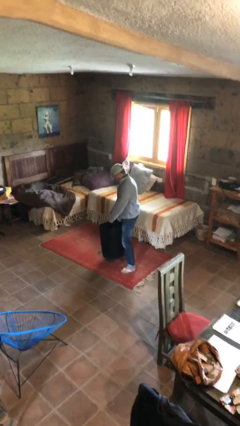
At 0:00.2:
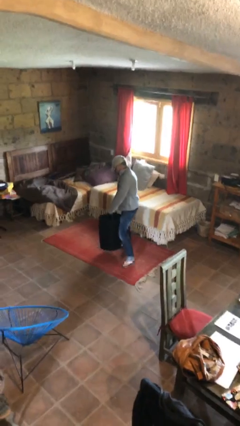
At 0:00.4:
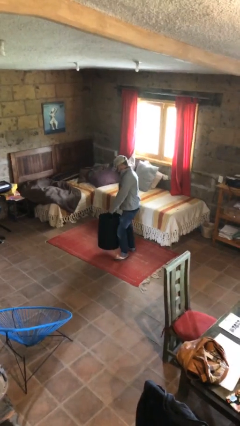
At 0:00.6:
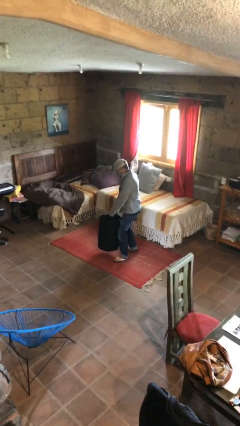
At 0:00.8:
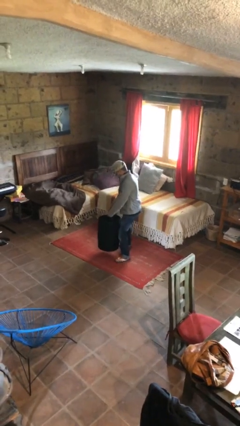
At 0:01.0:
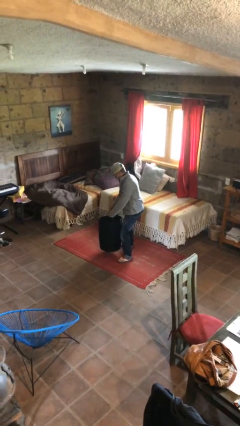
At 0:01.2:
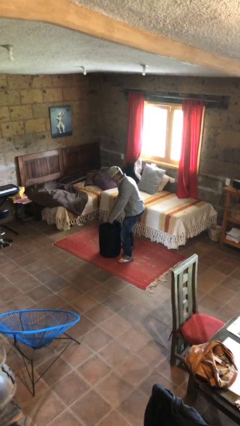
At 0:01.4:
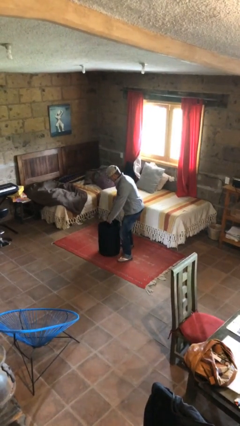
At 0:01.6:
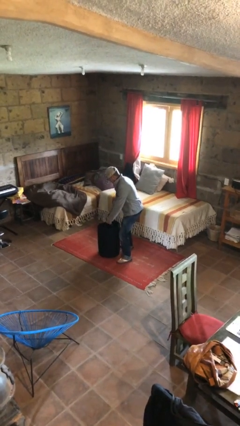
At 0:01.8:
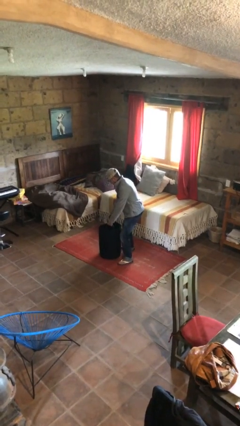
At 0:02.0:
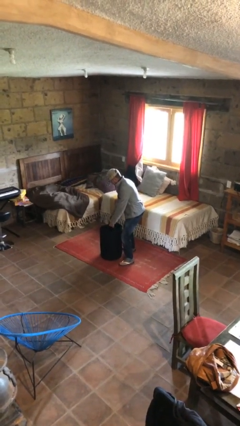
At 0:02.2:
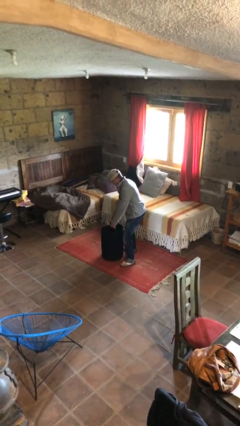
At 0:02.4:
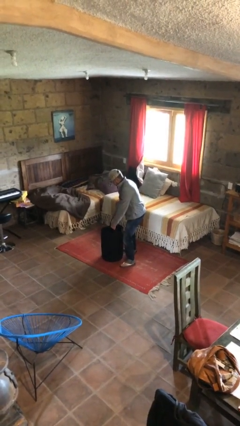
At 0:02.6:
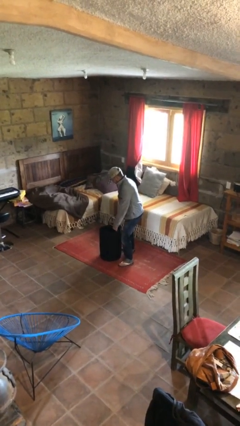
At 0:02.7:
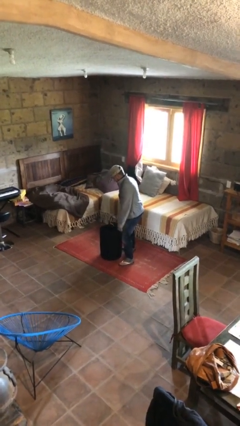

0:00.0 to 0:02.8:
person puts down object on floor

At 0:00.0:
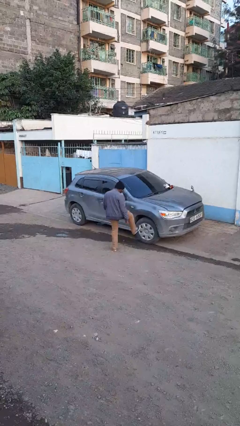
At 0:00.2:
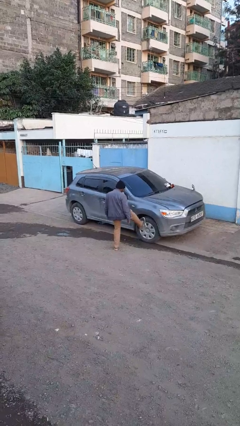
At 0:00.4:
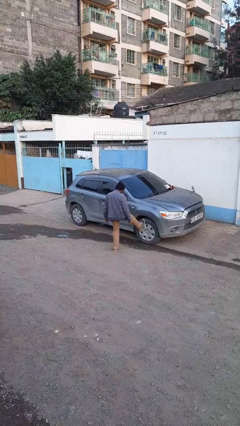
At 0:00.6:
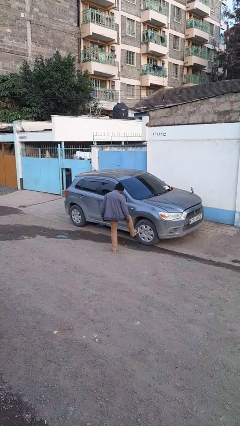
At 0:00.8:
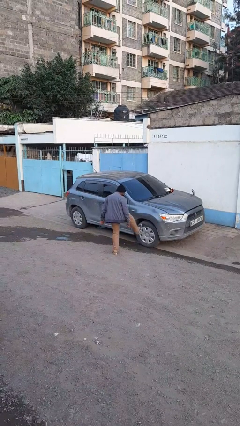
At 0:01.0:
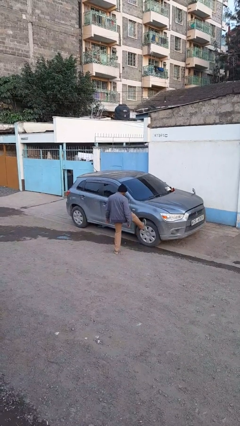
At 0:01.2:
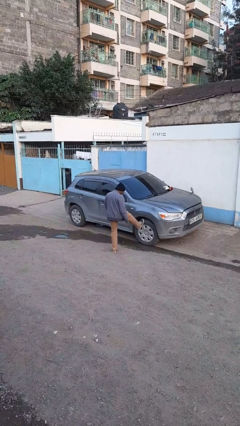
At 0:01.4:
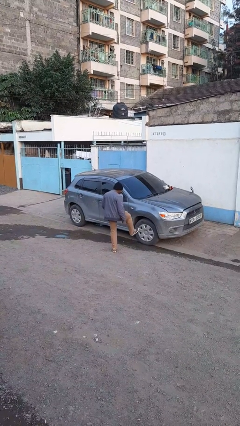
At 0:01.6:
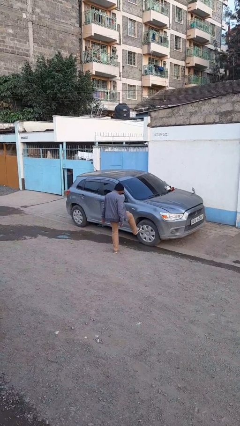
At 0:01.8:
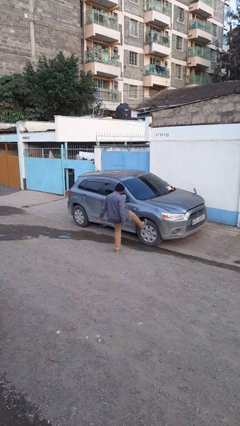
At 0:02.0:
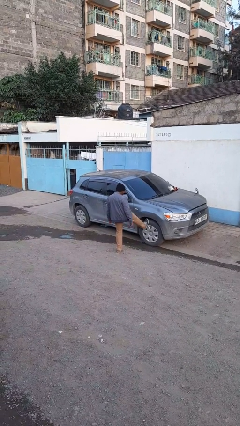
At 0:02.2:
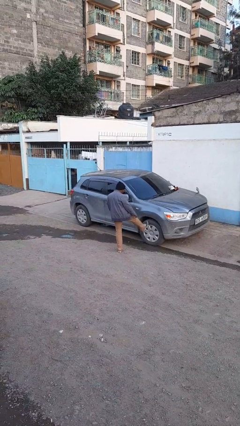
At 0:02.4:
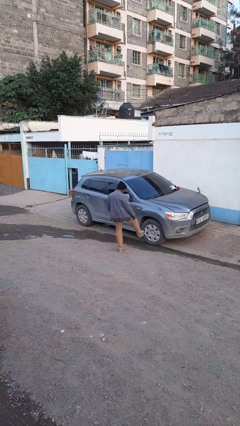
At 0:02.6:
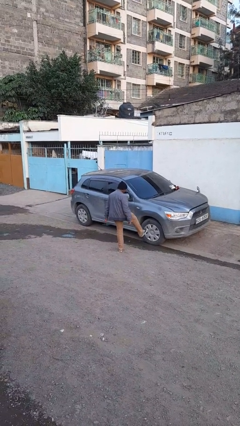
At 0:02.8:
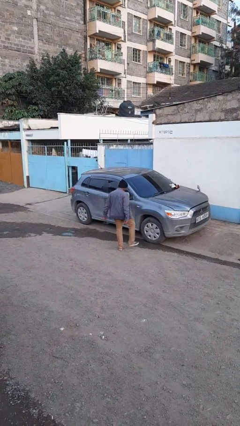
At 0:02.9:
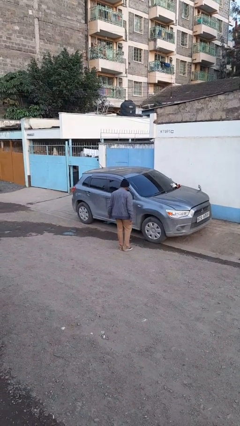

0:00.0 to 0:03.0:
person kicks car tires

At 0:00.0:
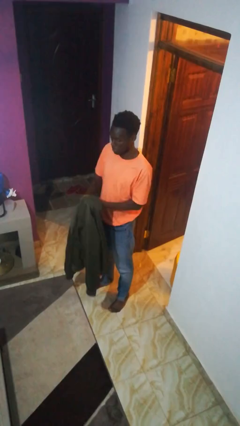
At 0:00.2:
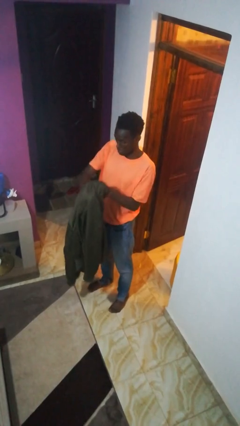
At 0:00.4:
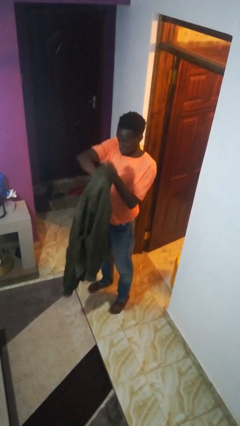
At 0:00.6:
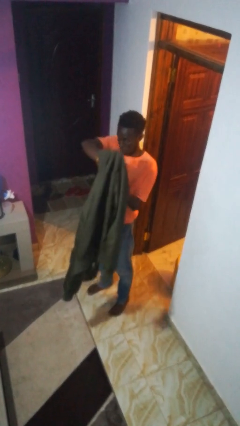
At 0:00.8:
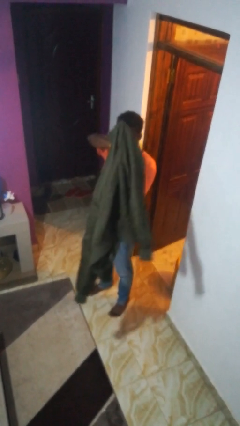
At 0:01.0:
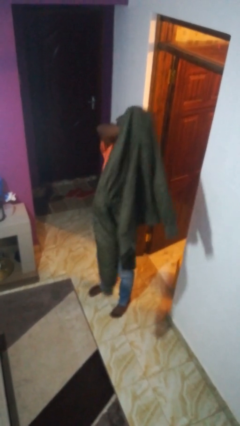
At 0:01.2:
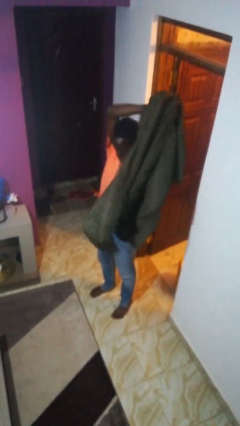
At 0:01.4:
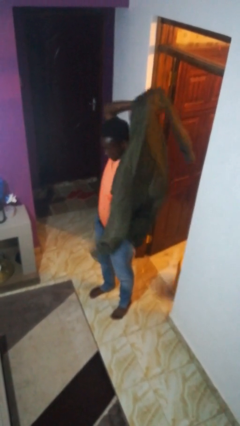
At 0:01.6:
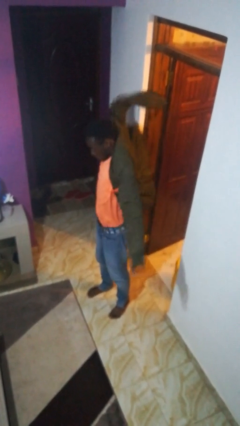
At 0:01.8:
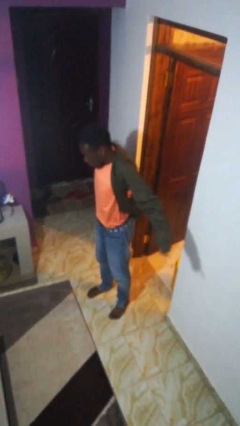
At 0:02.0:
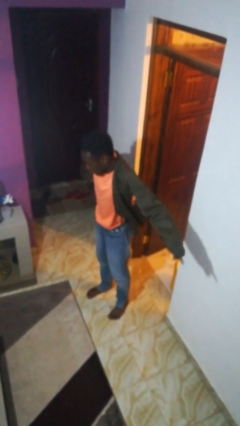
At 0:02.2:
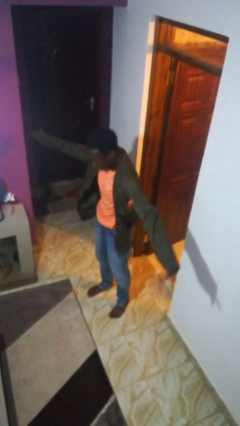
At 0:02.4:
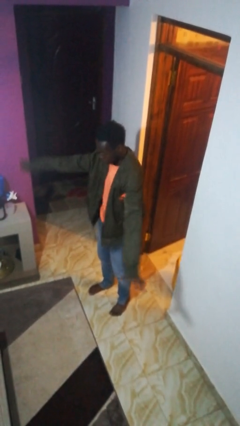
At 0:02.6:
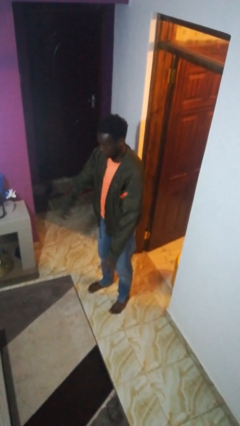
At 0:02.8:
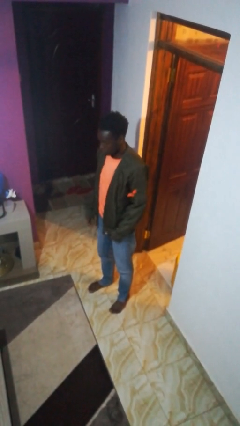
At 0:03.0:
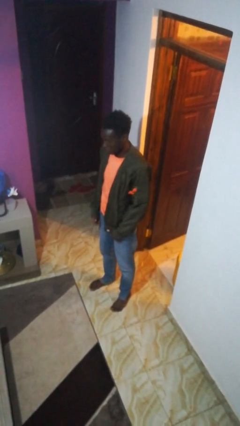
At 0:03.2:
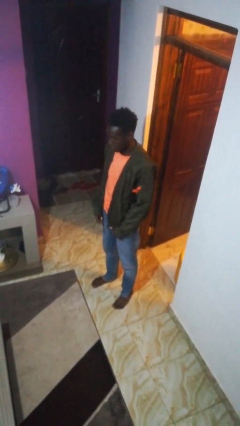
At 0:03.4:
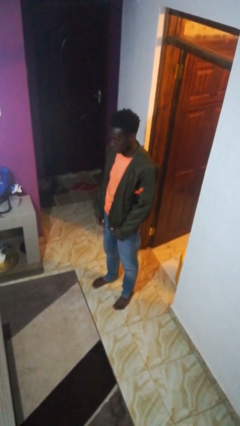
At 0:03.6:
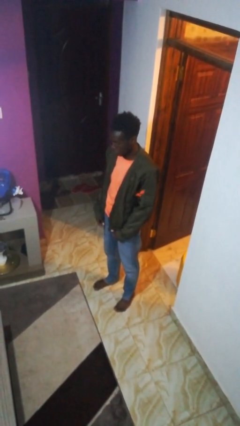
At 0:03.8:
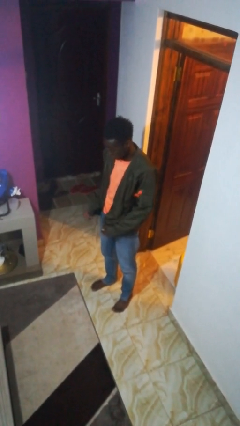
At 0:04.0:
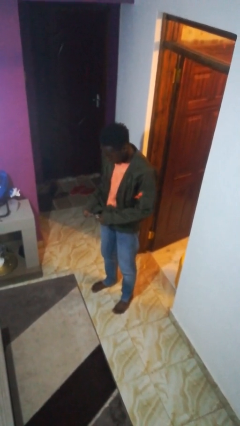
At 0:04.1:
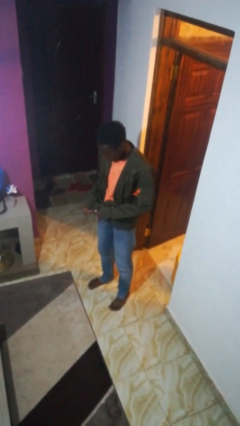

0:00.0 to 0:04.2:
person puts on jacket

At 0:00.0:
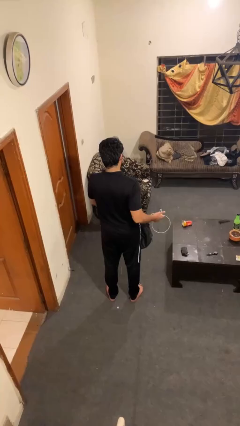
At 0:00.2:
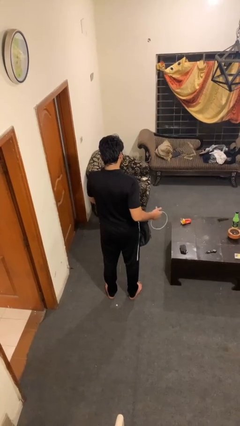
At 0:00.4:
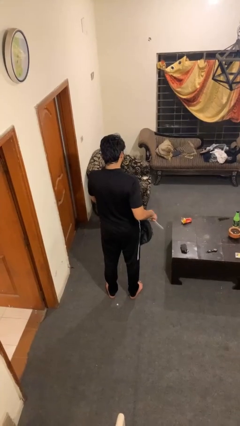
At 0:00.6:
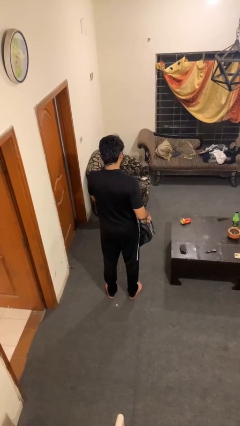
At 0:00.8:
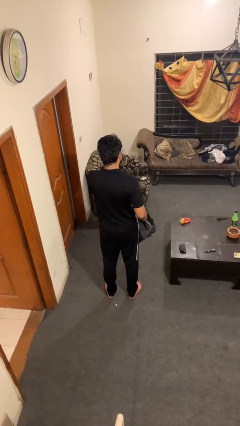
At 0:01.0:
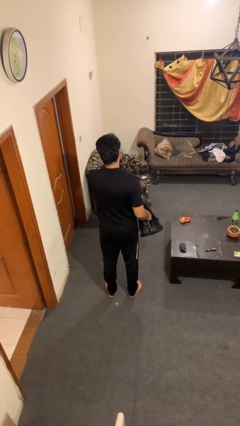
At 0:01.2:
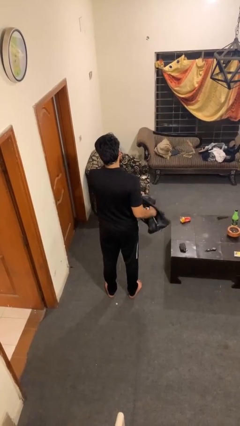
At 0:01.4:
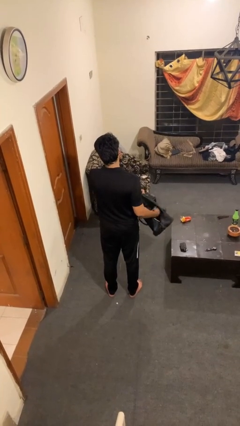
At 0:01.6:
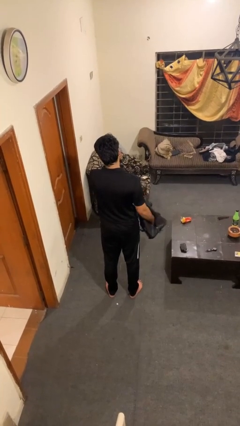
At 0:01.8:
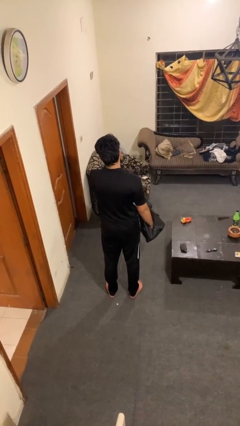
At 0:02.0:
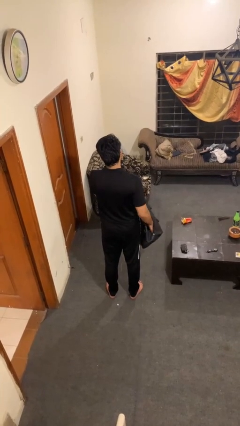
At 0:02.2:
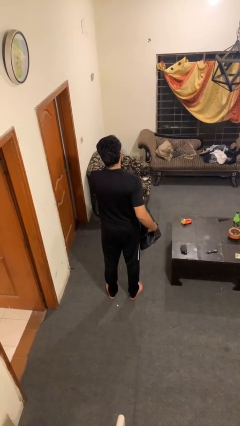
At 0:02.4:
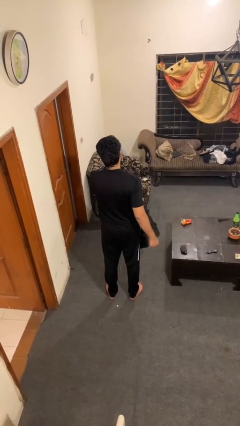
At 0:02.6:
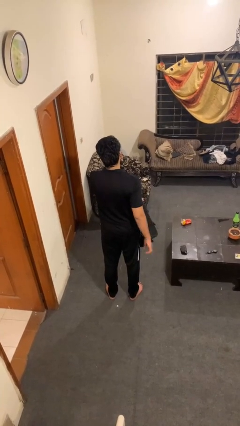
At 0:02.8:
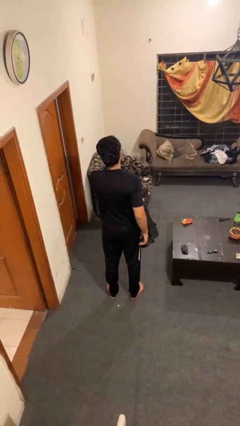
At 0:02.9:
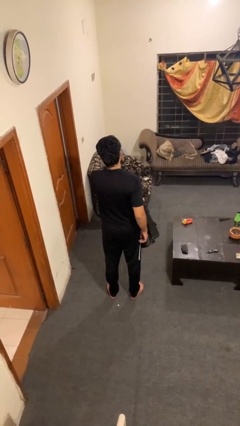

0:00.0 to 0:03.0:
person puts object into bag

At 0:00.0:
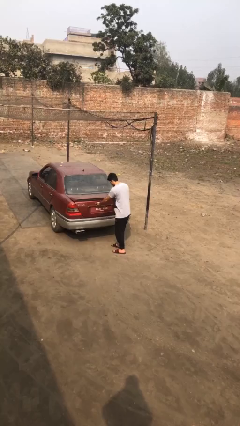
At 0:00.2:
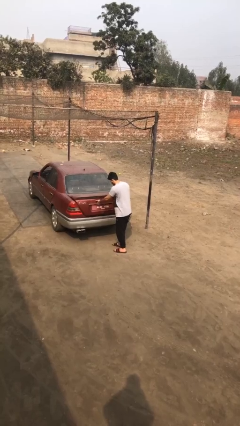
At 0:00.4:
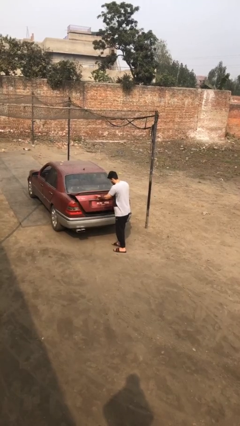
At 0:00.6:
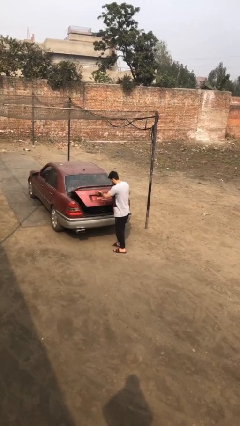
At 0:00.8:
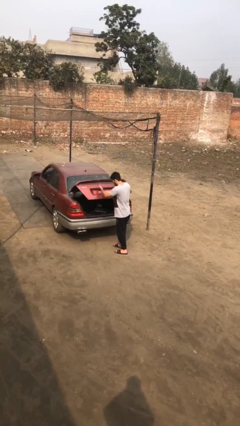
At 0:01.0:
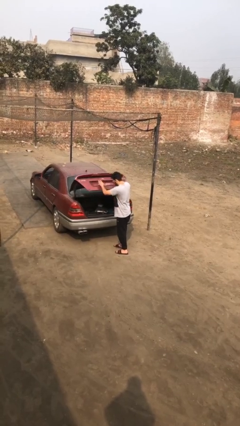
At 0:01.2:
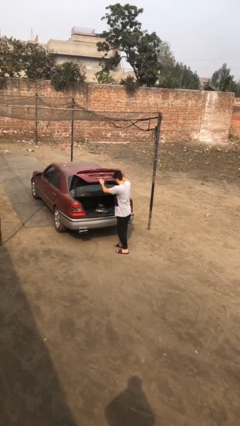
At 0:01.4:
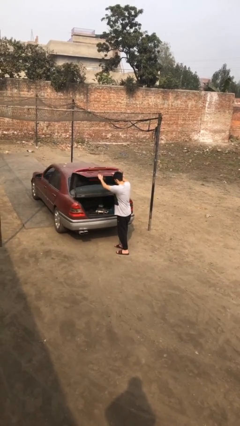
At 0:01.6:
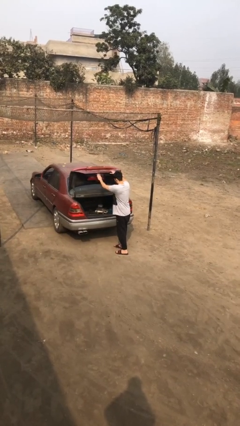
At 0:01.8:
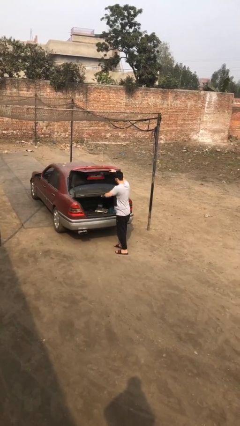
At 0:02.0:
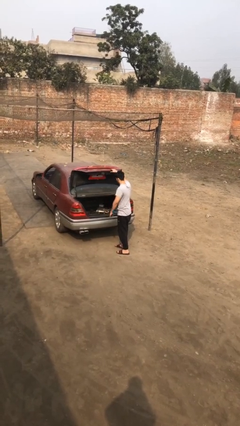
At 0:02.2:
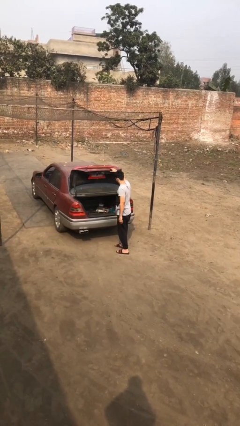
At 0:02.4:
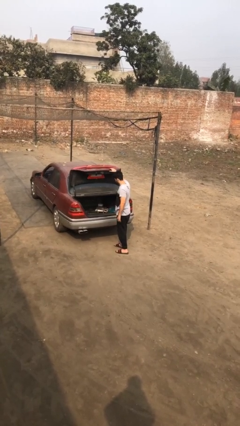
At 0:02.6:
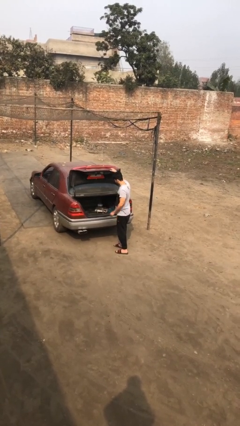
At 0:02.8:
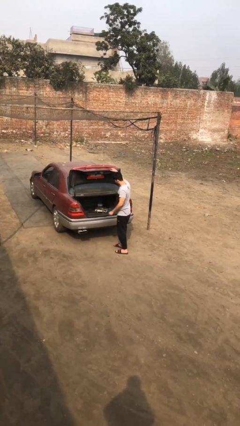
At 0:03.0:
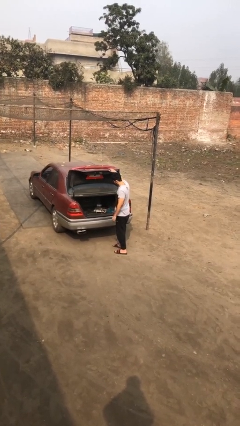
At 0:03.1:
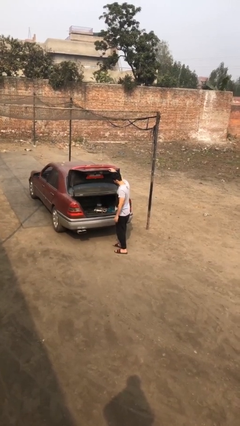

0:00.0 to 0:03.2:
person opens car trunk

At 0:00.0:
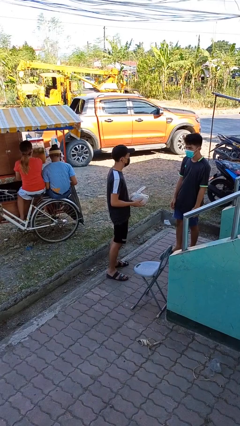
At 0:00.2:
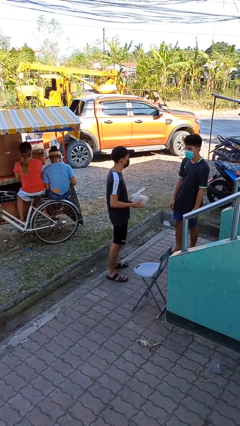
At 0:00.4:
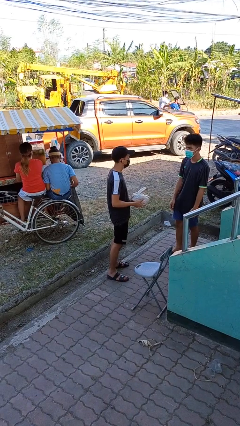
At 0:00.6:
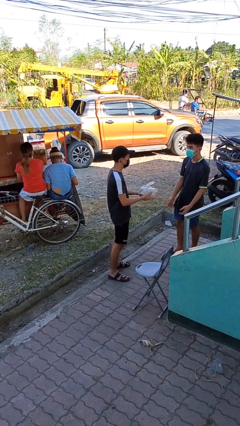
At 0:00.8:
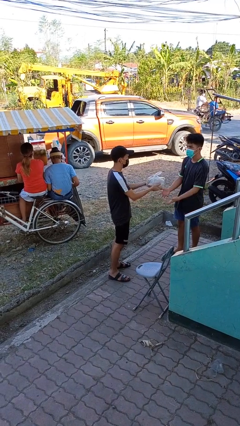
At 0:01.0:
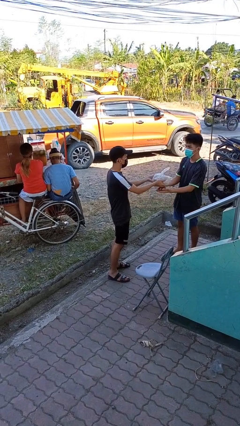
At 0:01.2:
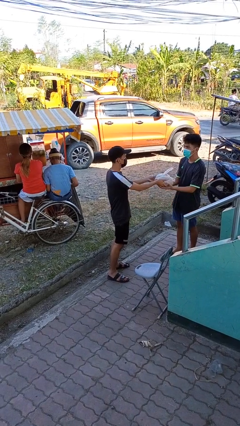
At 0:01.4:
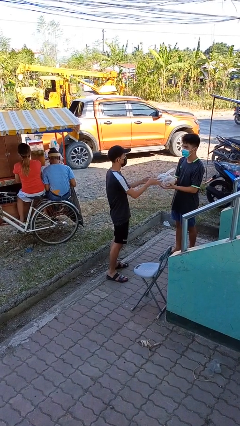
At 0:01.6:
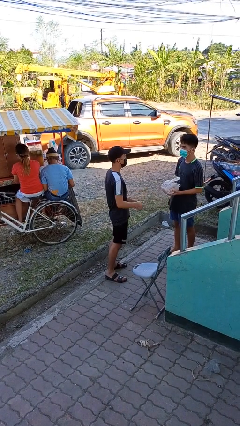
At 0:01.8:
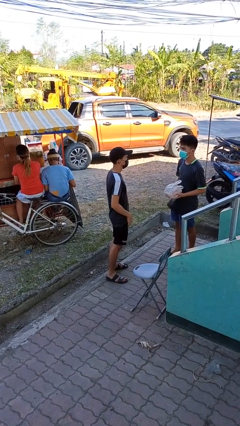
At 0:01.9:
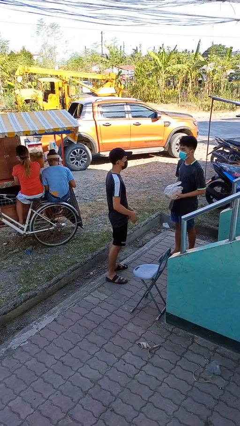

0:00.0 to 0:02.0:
person transfers object to person
